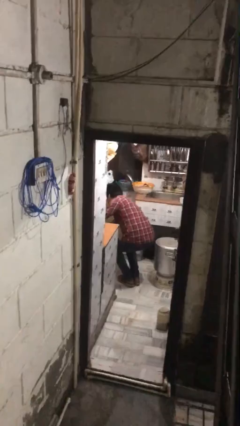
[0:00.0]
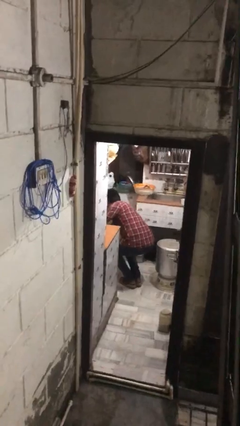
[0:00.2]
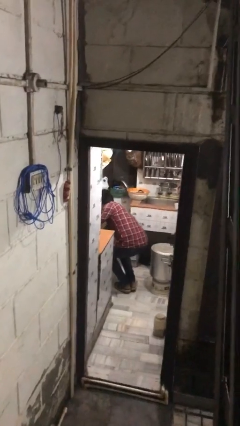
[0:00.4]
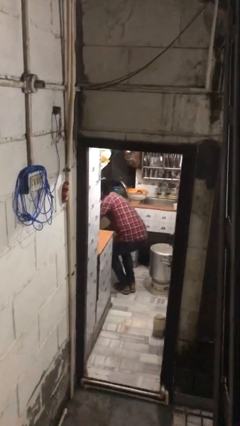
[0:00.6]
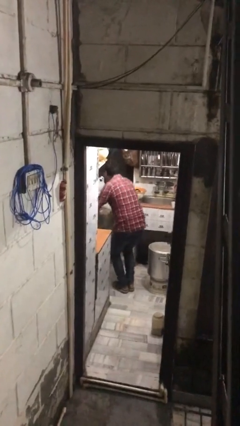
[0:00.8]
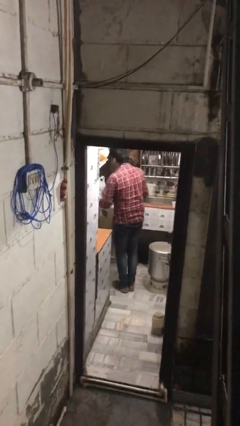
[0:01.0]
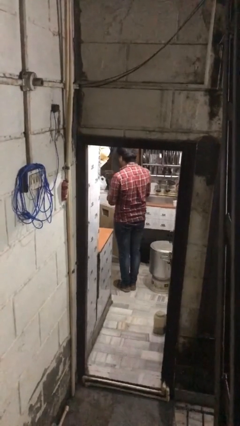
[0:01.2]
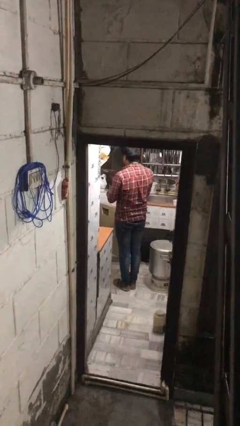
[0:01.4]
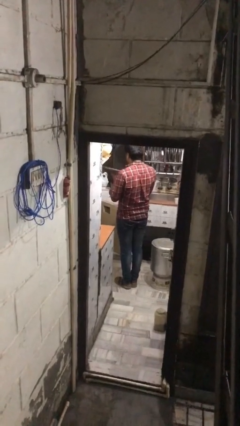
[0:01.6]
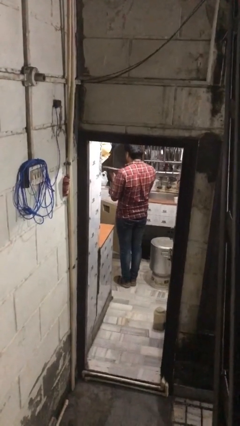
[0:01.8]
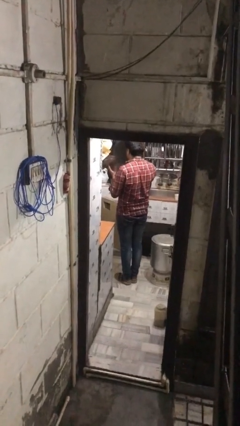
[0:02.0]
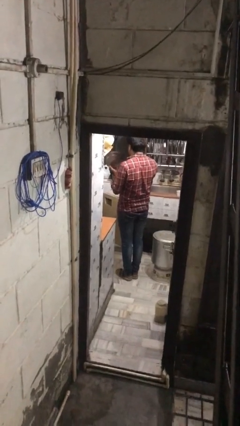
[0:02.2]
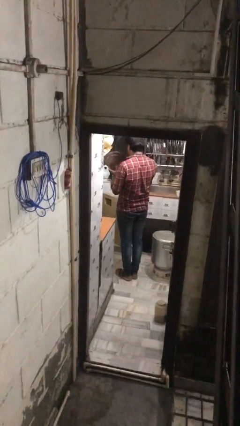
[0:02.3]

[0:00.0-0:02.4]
person takes object from kitchen drawer

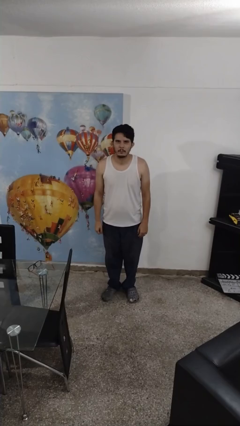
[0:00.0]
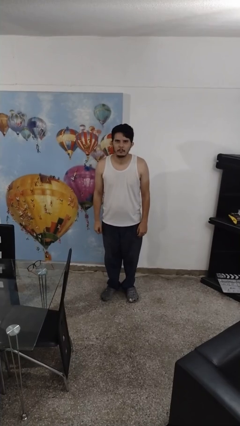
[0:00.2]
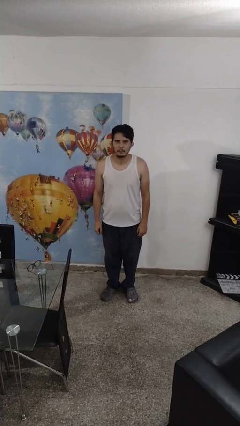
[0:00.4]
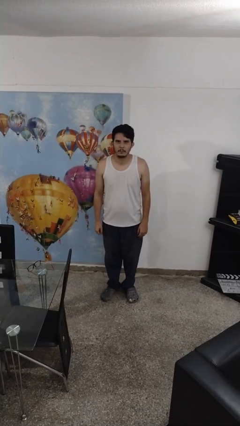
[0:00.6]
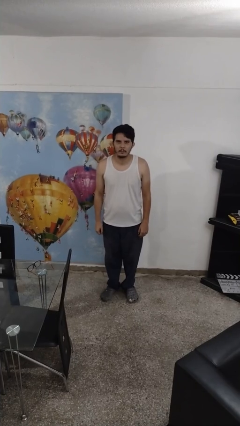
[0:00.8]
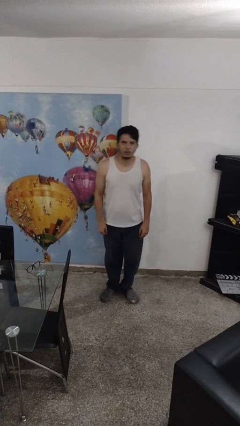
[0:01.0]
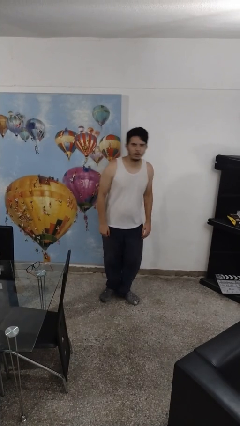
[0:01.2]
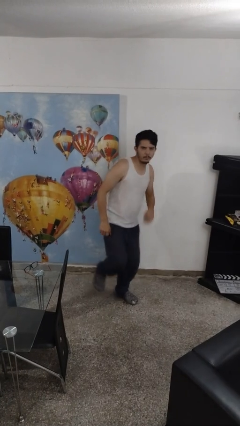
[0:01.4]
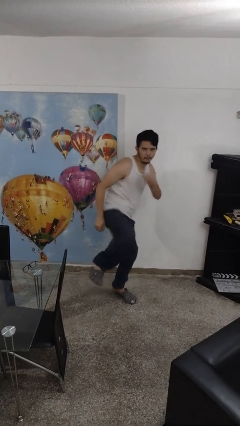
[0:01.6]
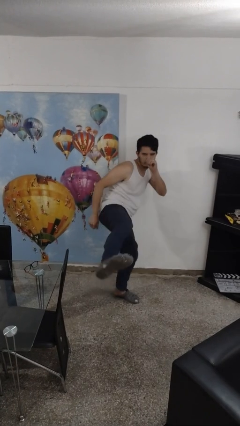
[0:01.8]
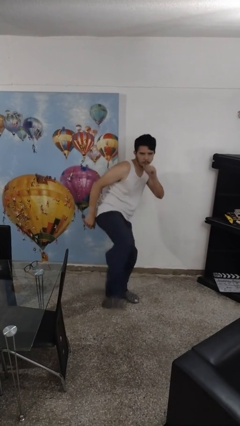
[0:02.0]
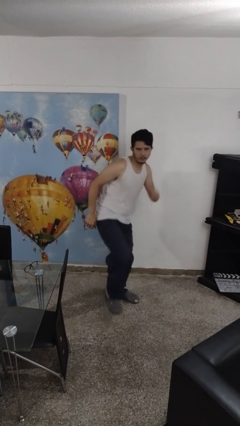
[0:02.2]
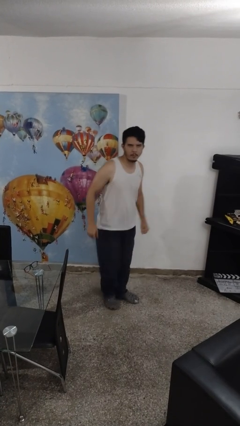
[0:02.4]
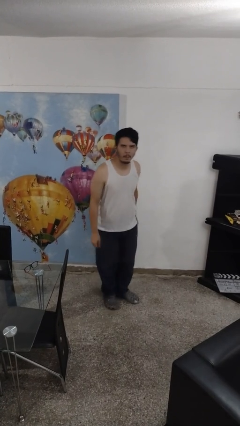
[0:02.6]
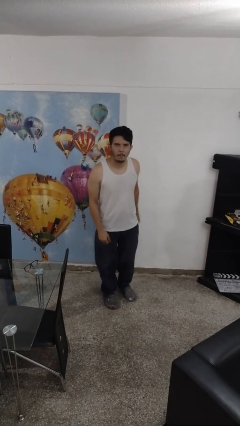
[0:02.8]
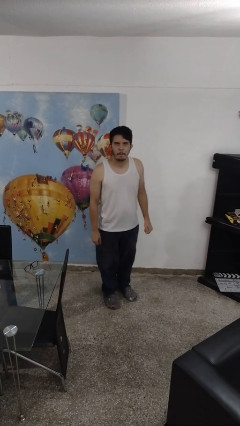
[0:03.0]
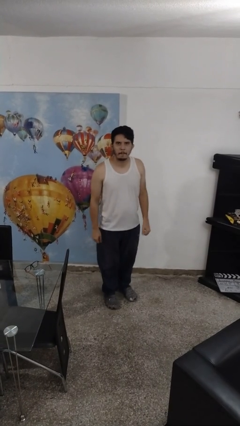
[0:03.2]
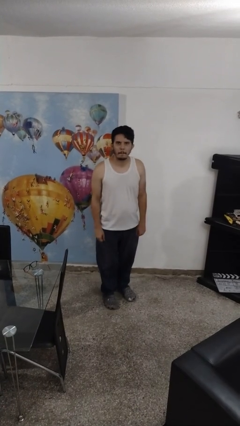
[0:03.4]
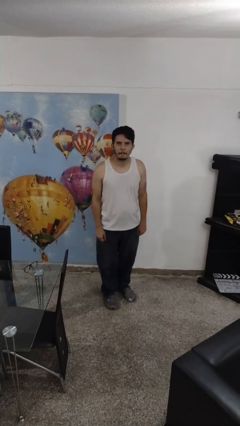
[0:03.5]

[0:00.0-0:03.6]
person karate kicks

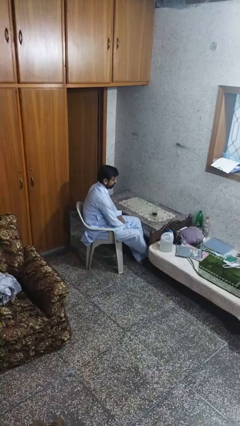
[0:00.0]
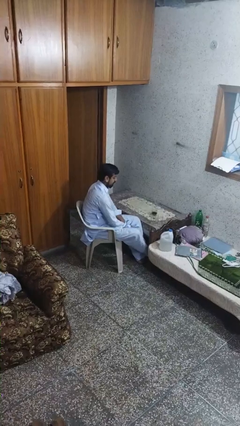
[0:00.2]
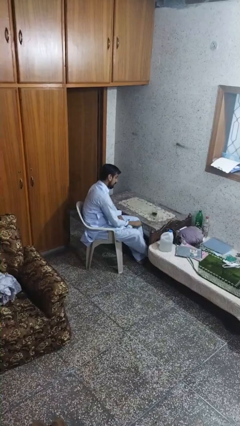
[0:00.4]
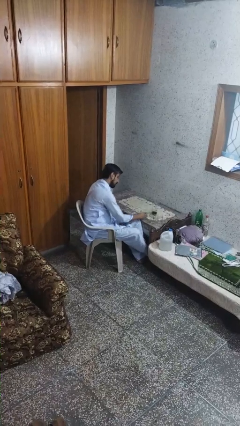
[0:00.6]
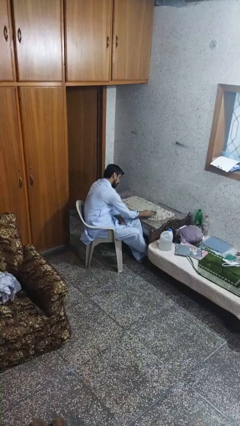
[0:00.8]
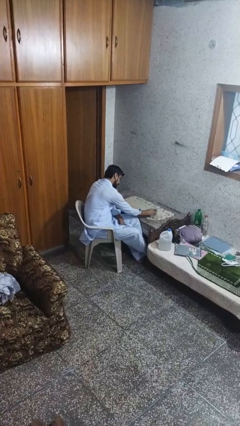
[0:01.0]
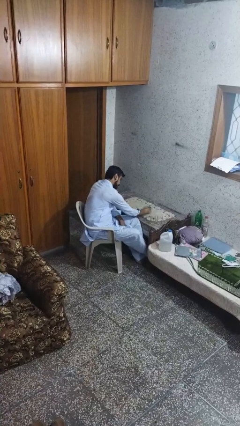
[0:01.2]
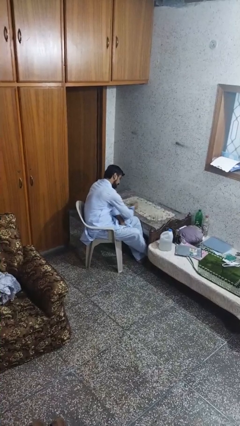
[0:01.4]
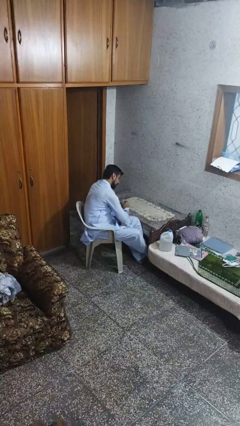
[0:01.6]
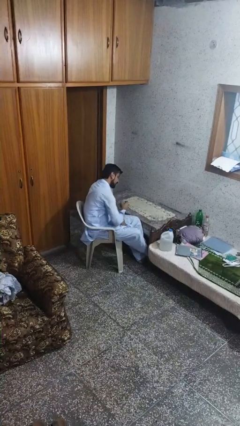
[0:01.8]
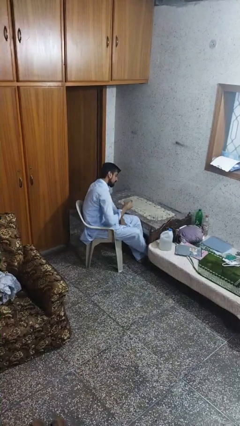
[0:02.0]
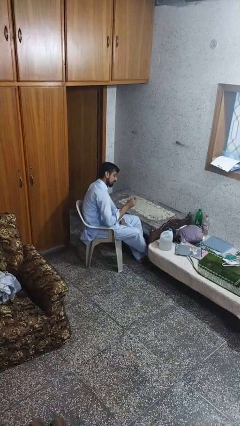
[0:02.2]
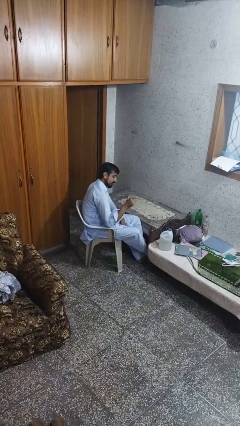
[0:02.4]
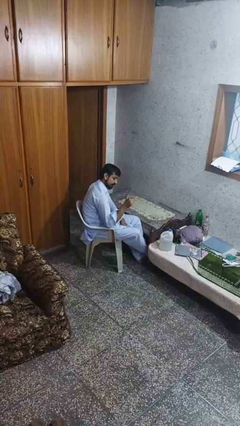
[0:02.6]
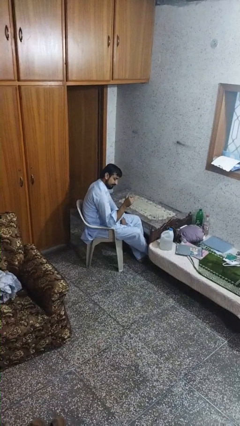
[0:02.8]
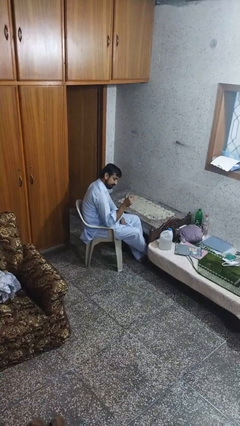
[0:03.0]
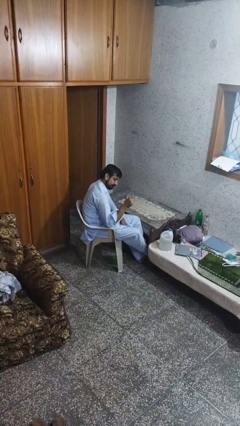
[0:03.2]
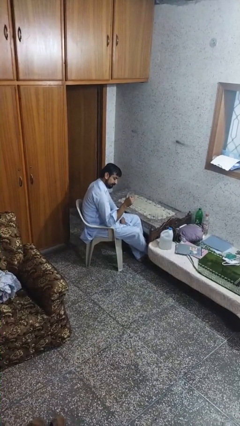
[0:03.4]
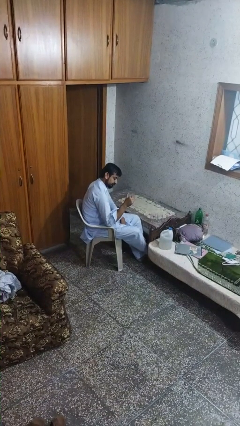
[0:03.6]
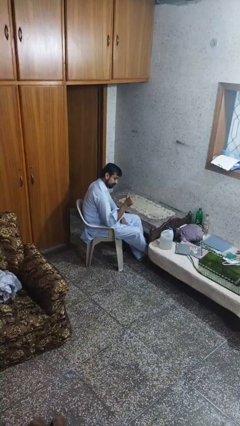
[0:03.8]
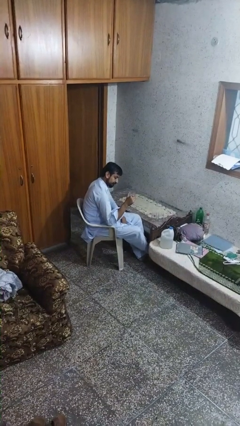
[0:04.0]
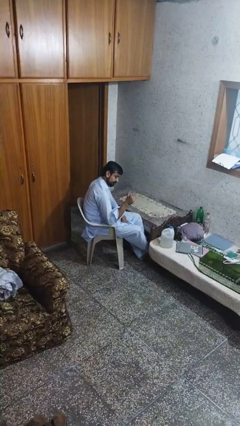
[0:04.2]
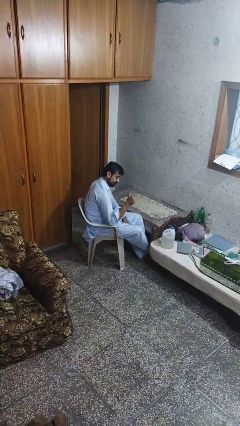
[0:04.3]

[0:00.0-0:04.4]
person picks up object from table

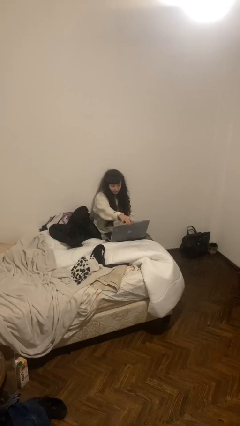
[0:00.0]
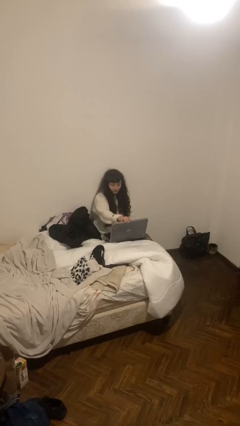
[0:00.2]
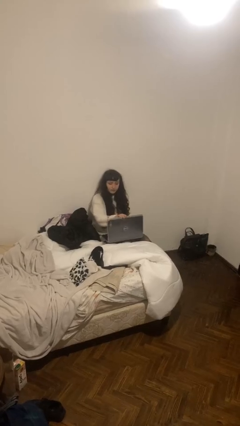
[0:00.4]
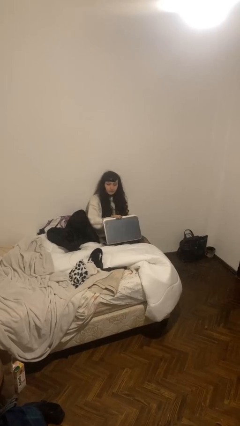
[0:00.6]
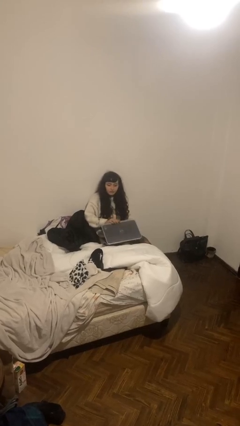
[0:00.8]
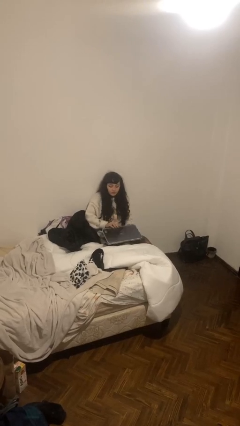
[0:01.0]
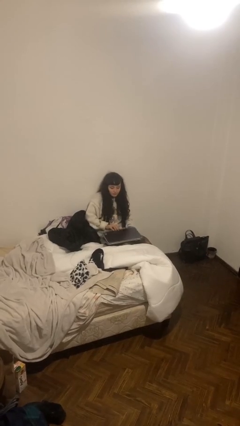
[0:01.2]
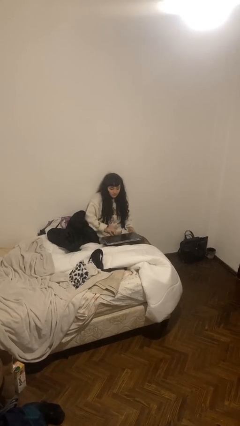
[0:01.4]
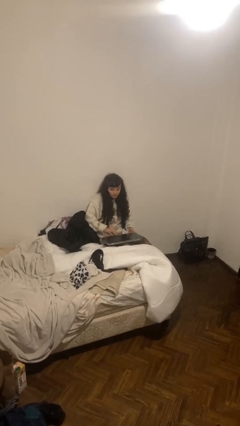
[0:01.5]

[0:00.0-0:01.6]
person closes laptop

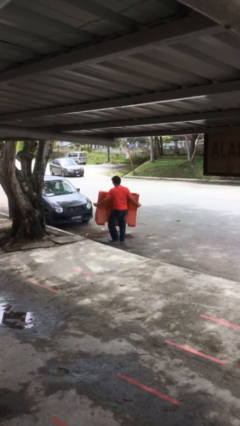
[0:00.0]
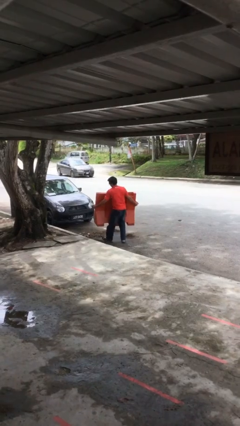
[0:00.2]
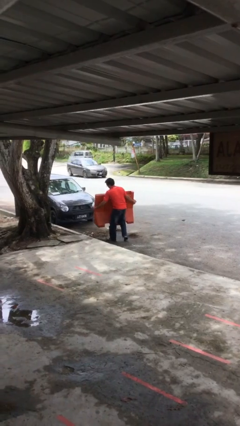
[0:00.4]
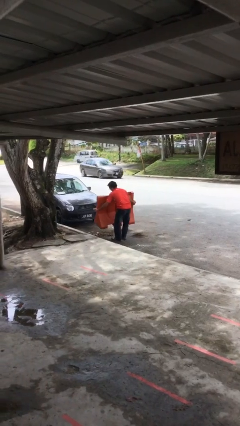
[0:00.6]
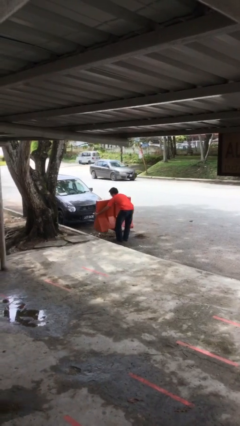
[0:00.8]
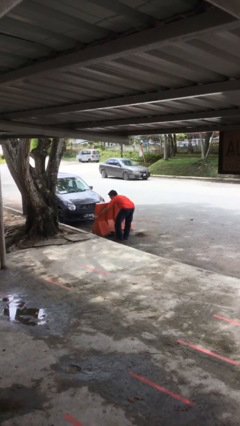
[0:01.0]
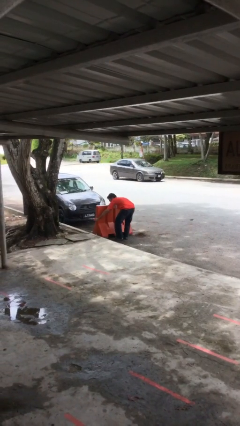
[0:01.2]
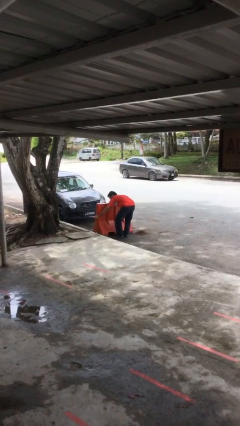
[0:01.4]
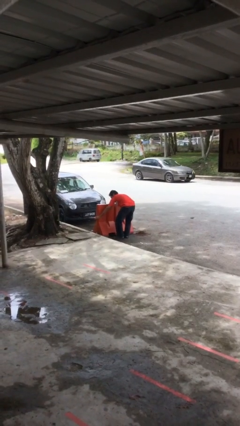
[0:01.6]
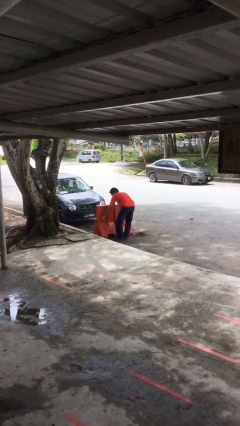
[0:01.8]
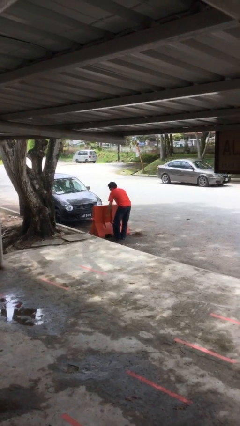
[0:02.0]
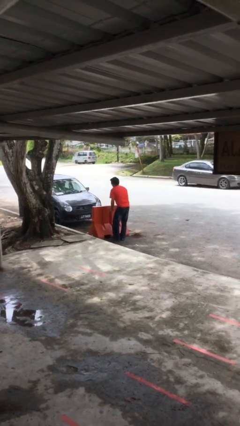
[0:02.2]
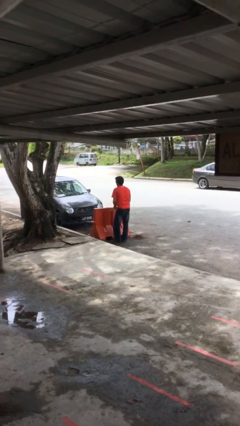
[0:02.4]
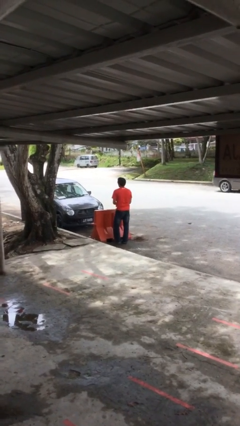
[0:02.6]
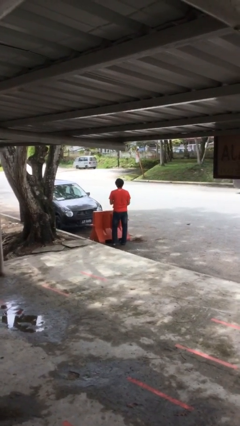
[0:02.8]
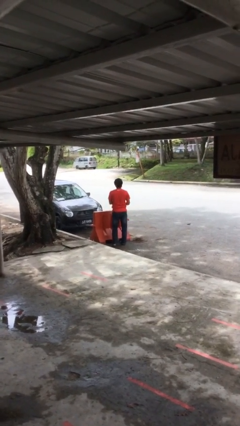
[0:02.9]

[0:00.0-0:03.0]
person puts down object on floor

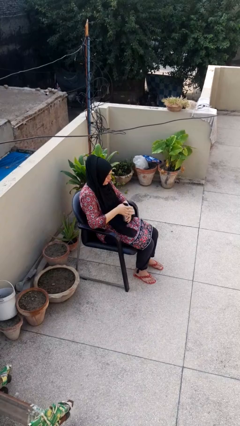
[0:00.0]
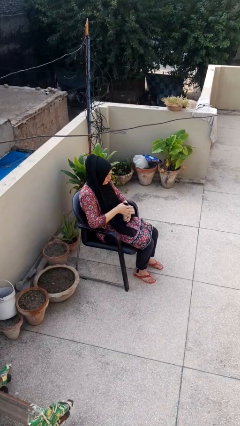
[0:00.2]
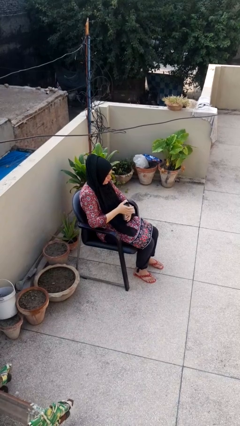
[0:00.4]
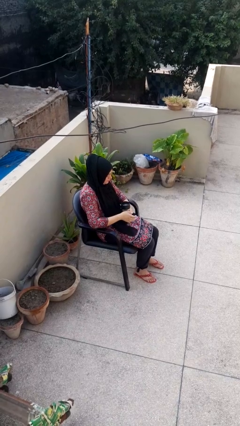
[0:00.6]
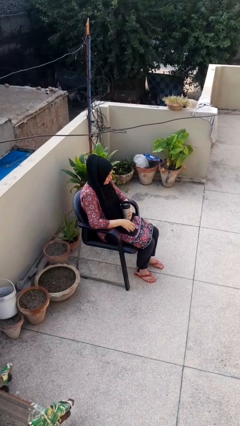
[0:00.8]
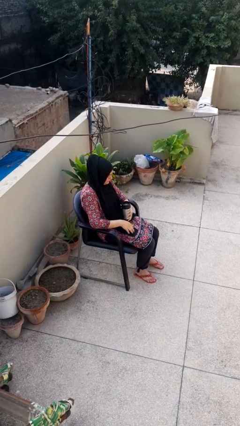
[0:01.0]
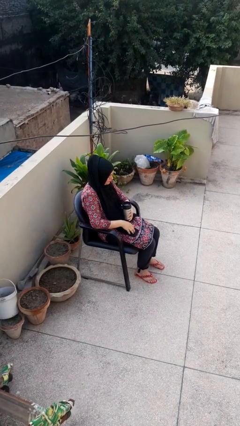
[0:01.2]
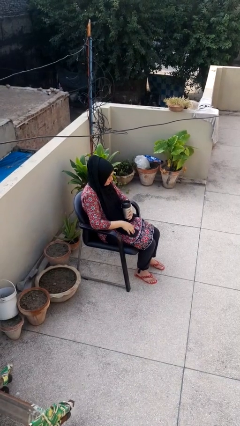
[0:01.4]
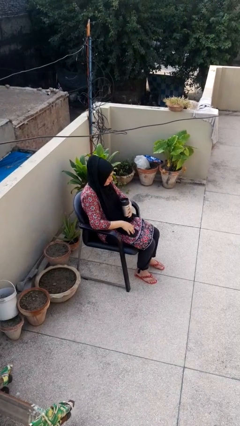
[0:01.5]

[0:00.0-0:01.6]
person opens beverage can

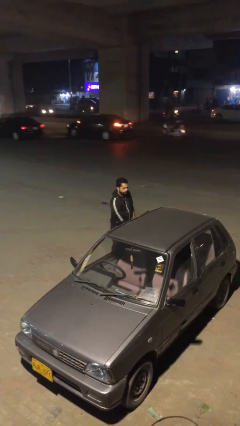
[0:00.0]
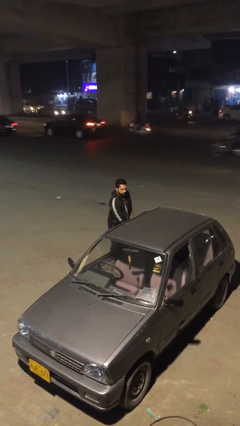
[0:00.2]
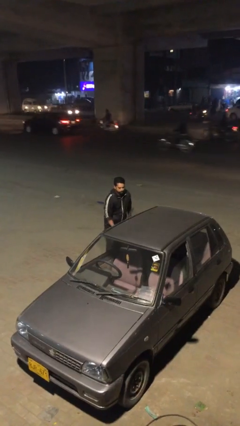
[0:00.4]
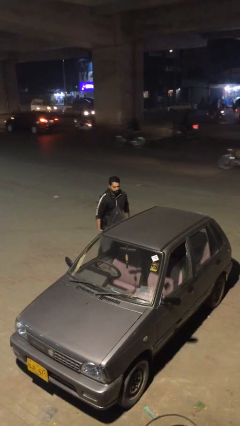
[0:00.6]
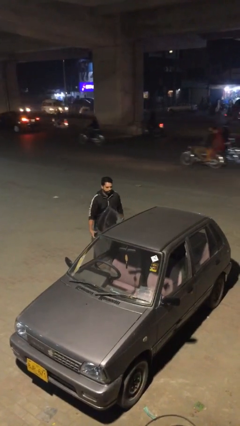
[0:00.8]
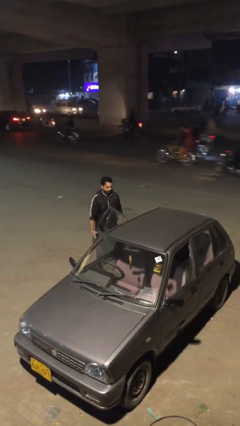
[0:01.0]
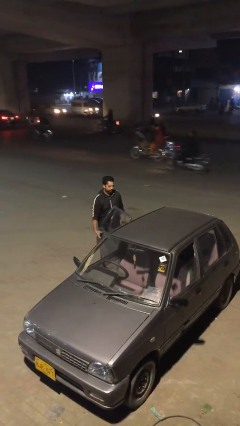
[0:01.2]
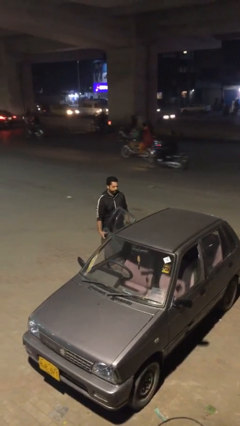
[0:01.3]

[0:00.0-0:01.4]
person opens car door
